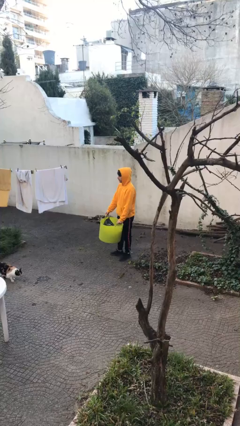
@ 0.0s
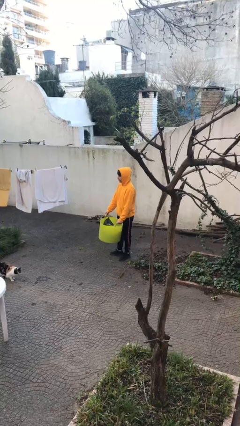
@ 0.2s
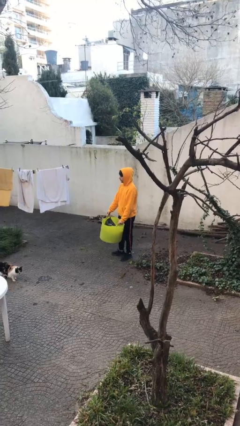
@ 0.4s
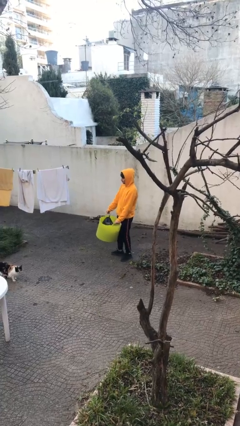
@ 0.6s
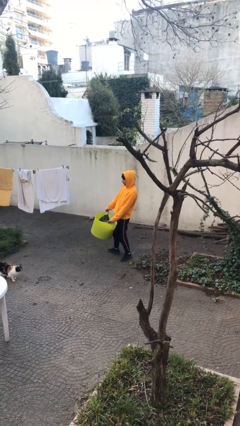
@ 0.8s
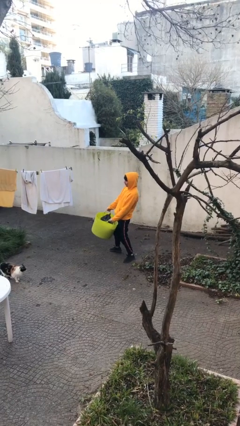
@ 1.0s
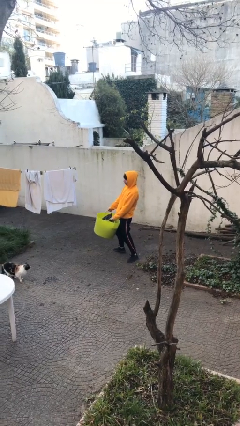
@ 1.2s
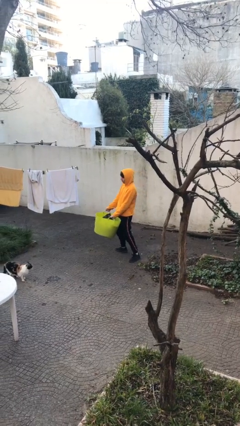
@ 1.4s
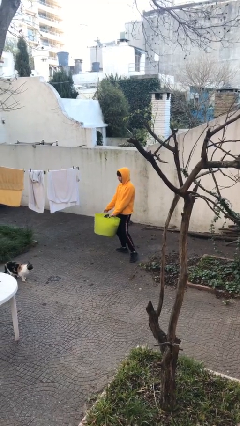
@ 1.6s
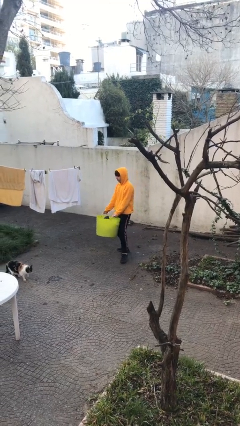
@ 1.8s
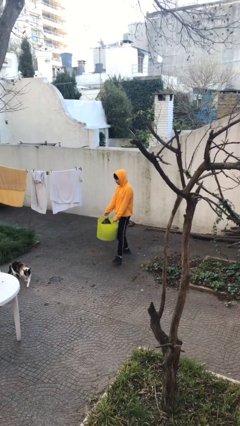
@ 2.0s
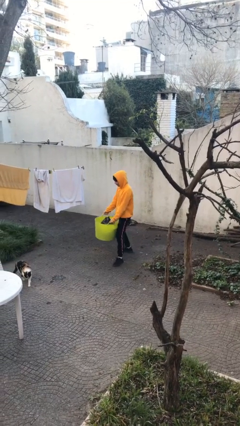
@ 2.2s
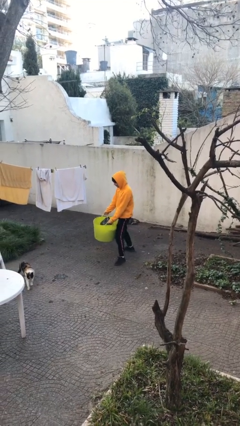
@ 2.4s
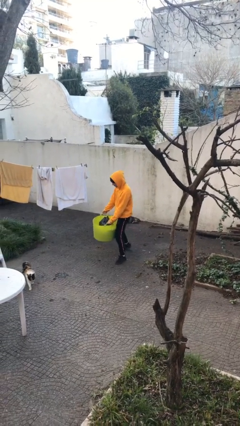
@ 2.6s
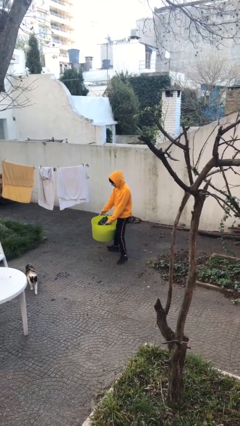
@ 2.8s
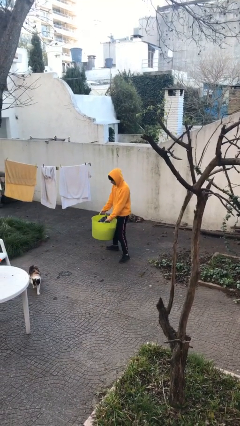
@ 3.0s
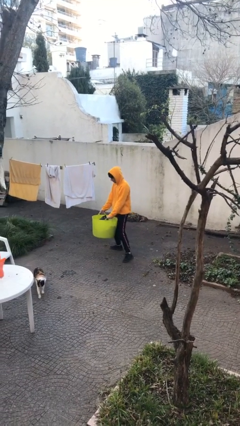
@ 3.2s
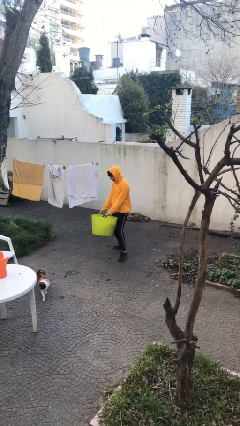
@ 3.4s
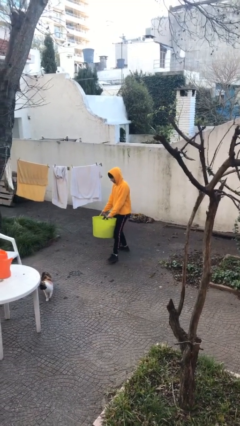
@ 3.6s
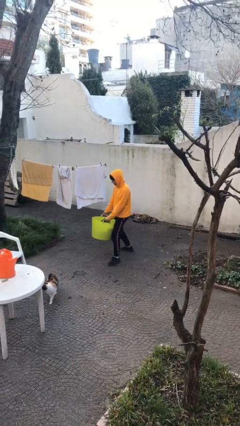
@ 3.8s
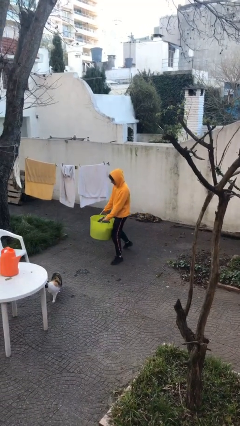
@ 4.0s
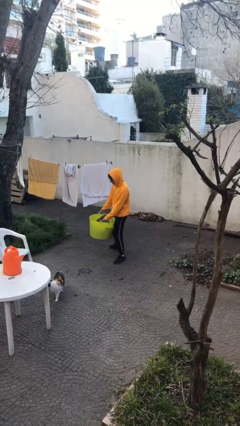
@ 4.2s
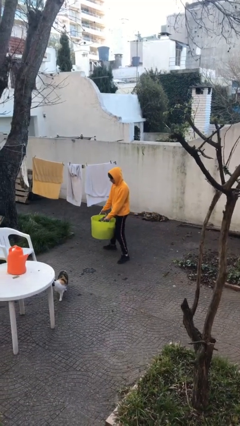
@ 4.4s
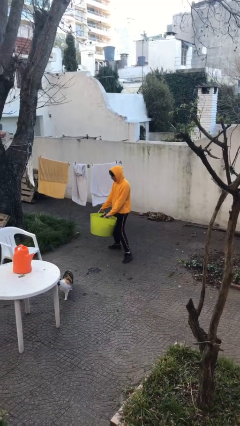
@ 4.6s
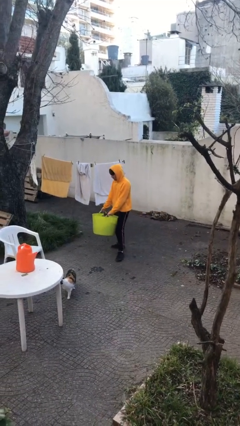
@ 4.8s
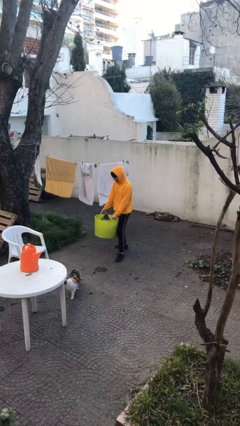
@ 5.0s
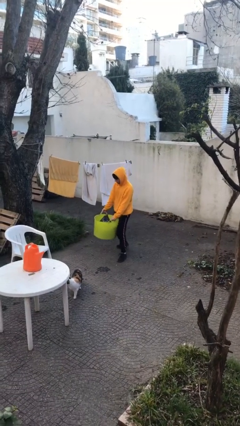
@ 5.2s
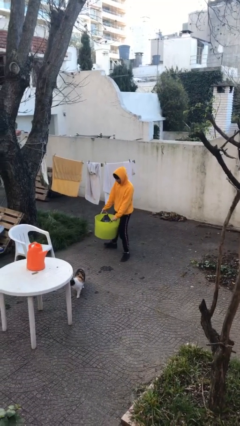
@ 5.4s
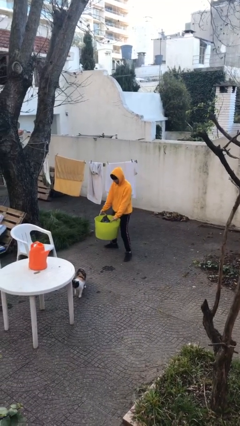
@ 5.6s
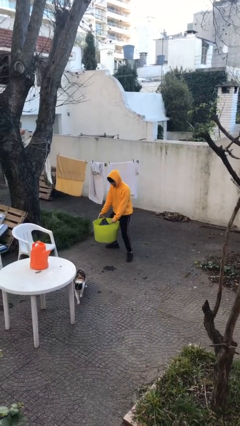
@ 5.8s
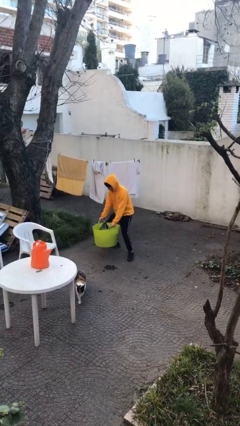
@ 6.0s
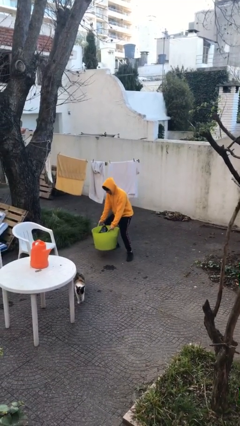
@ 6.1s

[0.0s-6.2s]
person carries heavy object

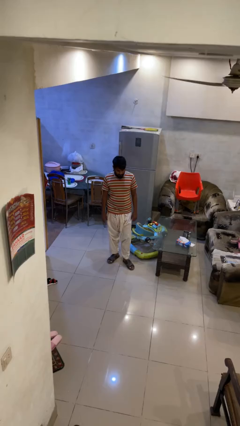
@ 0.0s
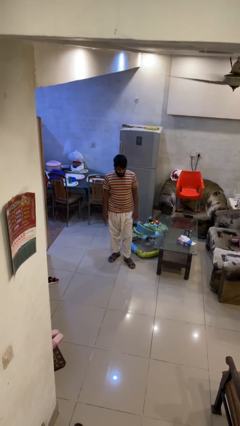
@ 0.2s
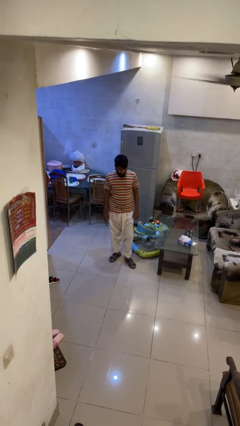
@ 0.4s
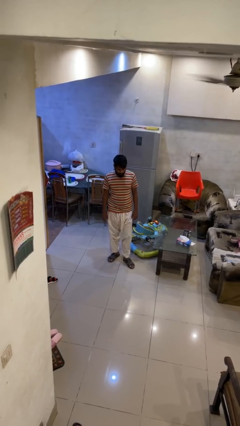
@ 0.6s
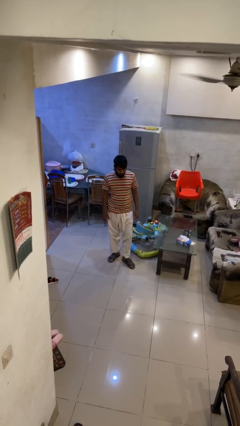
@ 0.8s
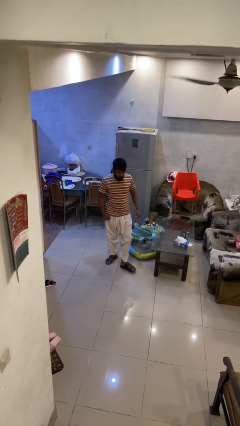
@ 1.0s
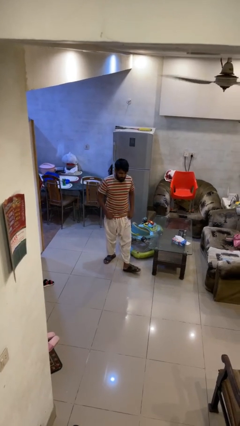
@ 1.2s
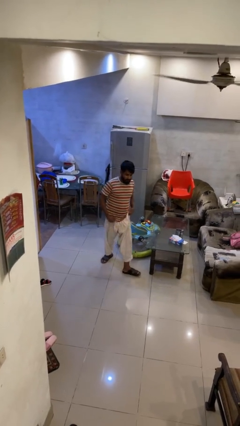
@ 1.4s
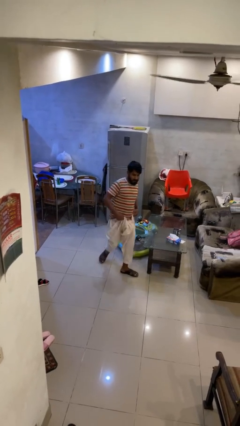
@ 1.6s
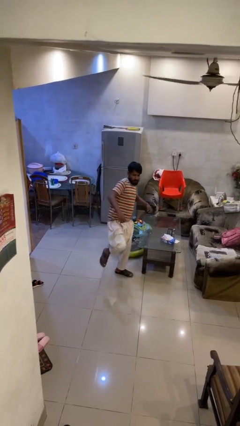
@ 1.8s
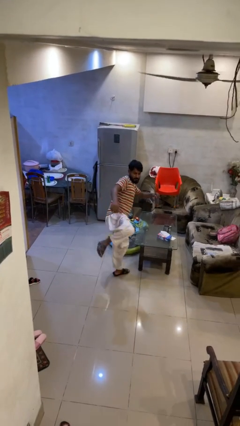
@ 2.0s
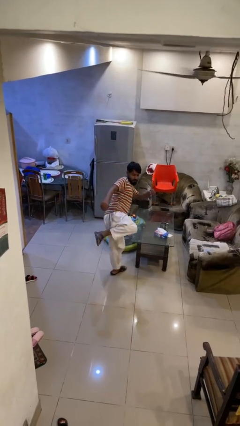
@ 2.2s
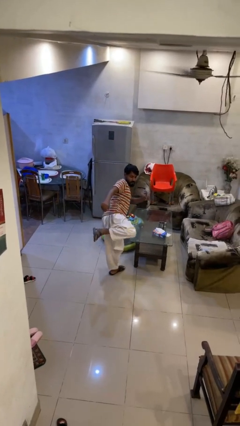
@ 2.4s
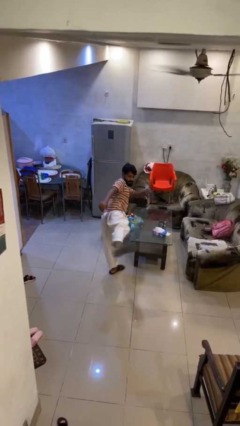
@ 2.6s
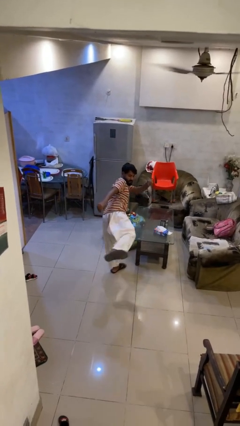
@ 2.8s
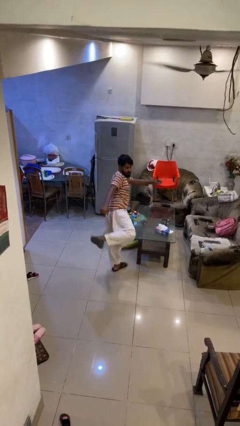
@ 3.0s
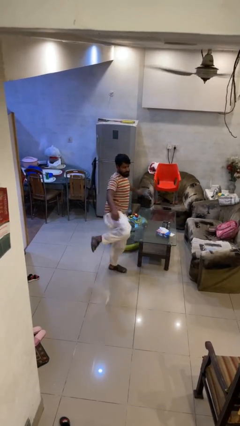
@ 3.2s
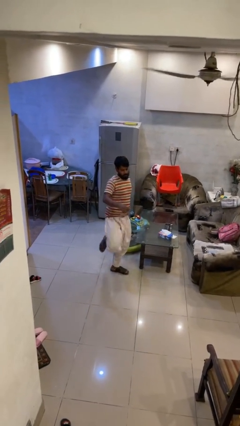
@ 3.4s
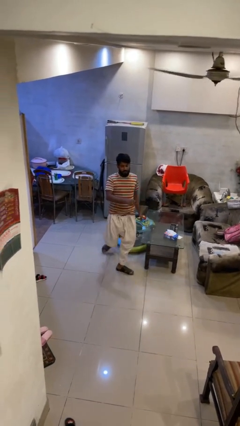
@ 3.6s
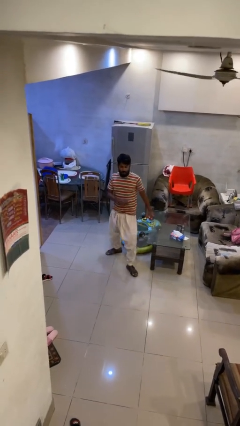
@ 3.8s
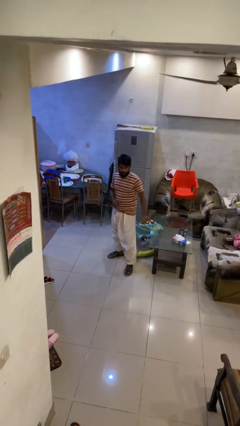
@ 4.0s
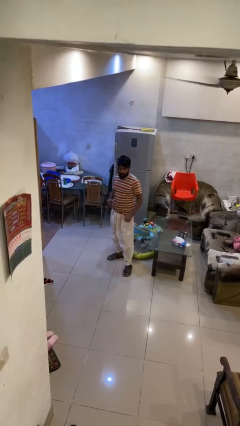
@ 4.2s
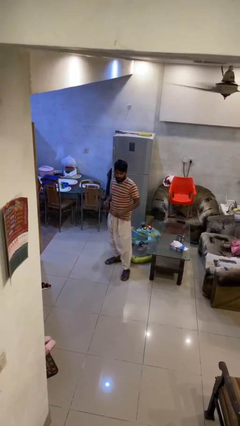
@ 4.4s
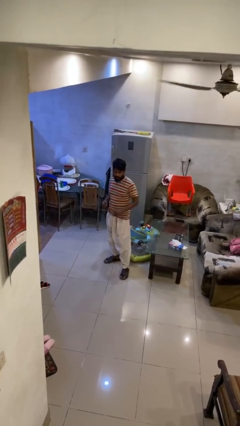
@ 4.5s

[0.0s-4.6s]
person karate kicks

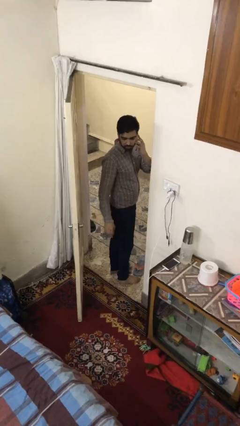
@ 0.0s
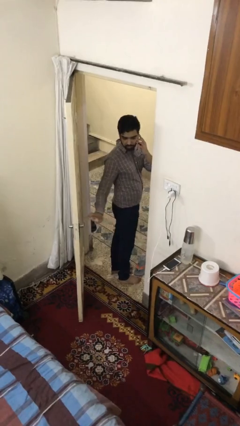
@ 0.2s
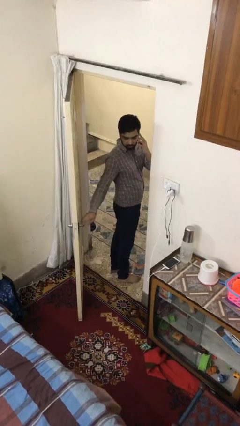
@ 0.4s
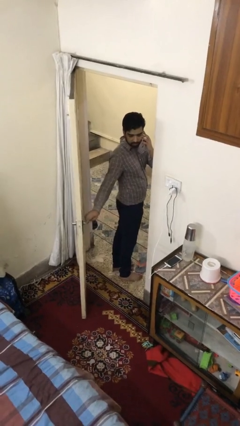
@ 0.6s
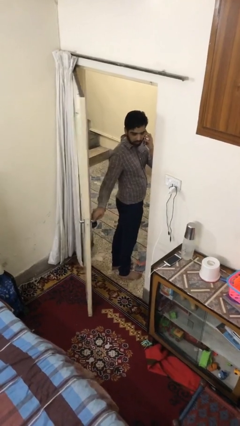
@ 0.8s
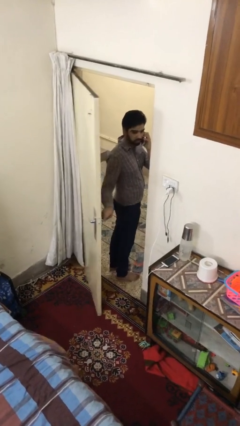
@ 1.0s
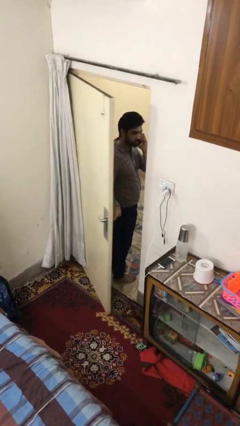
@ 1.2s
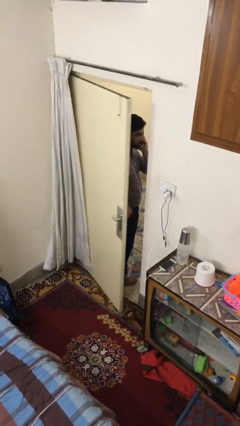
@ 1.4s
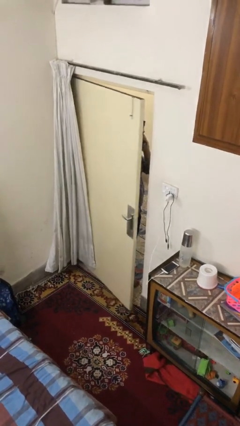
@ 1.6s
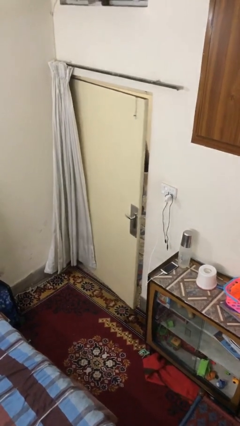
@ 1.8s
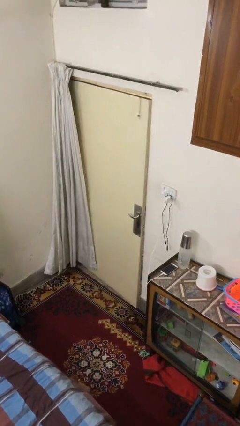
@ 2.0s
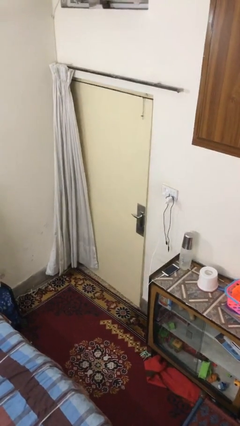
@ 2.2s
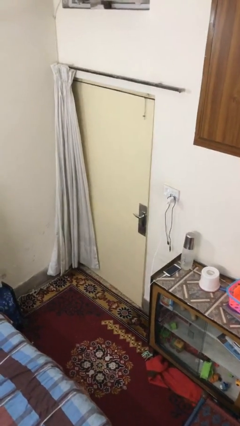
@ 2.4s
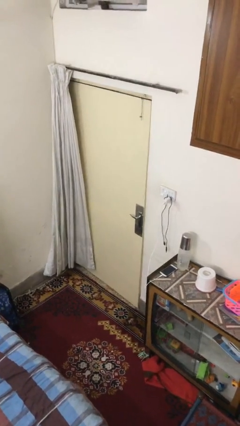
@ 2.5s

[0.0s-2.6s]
person closes facility door

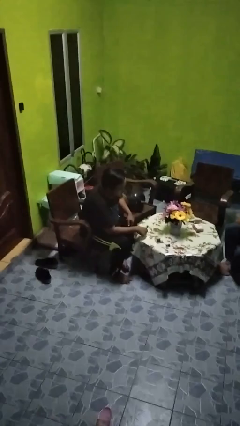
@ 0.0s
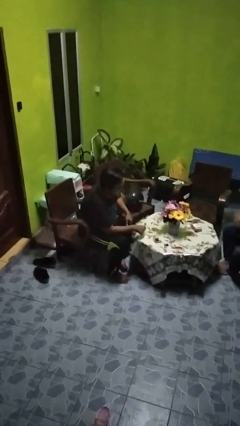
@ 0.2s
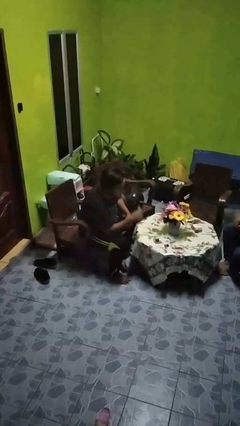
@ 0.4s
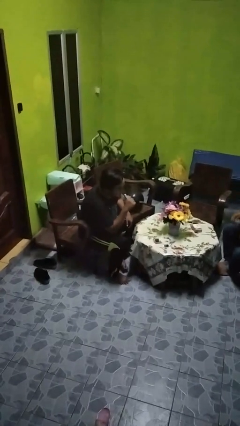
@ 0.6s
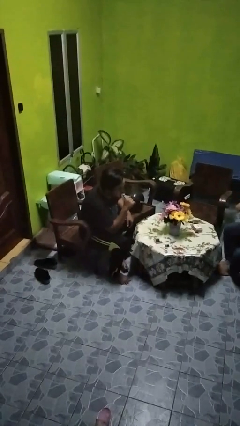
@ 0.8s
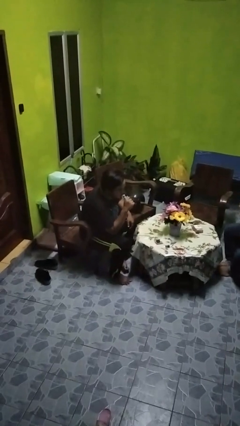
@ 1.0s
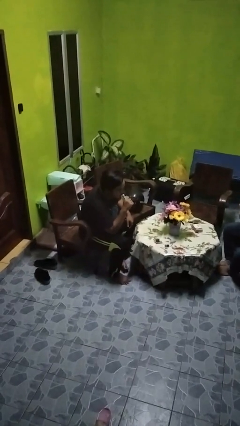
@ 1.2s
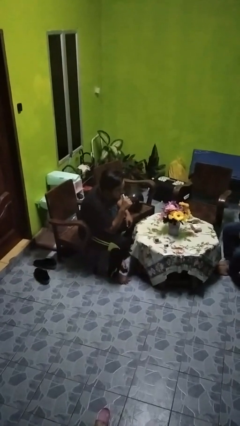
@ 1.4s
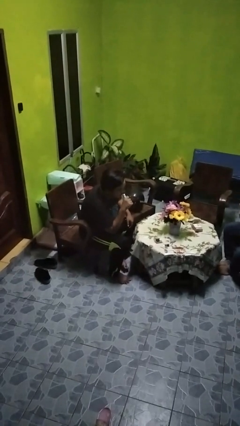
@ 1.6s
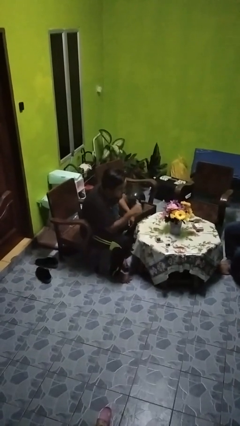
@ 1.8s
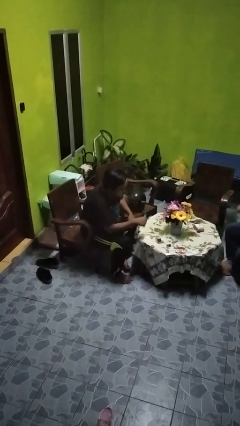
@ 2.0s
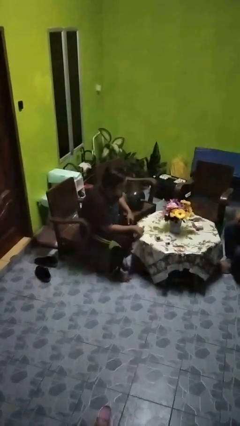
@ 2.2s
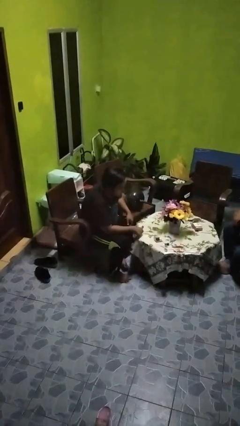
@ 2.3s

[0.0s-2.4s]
person vapes

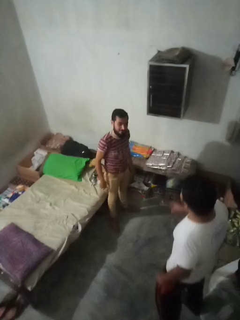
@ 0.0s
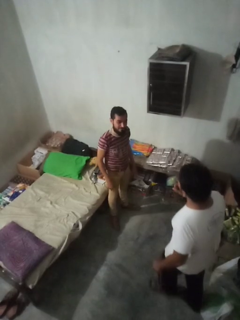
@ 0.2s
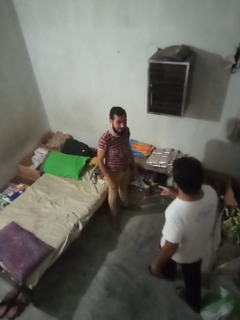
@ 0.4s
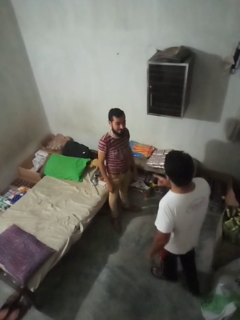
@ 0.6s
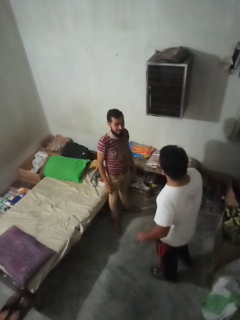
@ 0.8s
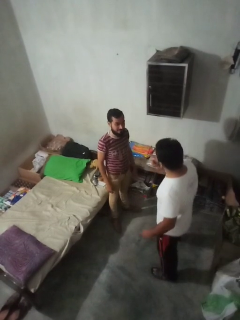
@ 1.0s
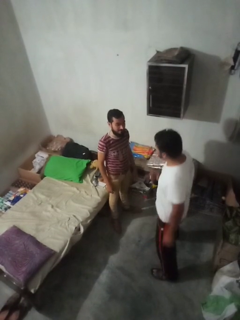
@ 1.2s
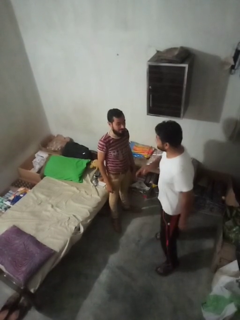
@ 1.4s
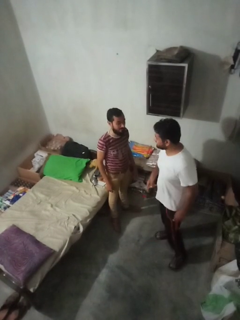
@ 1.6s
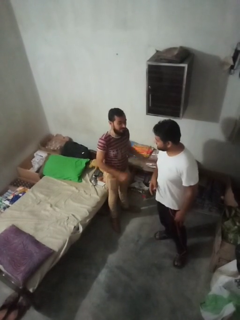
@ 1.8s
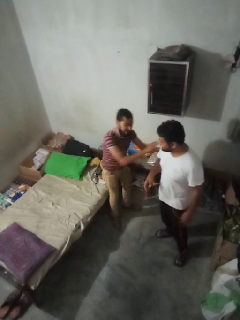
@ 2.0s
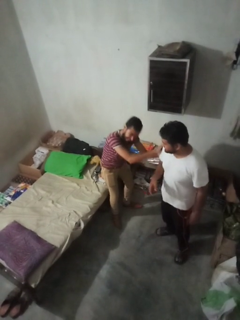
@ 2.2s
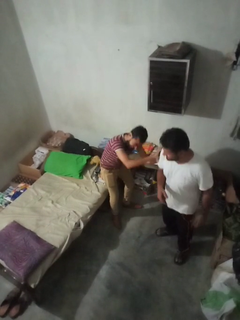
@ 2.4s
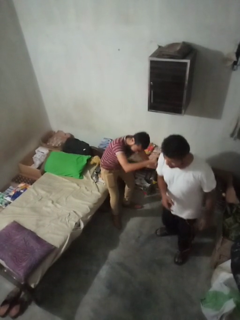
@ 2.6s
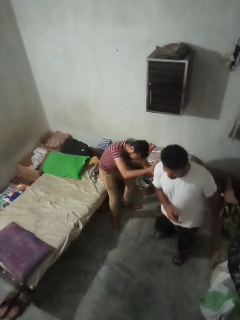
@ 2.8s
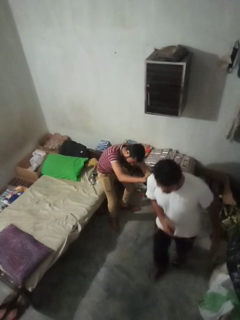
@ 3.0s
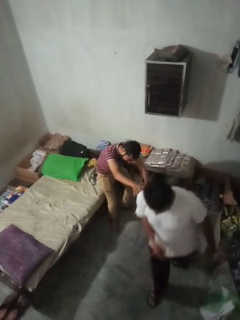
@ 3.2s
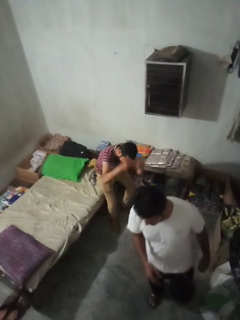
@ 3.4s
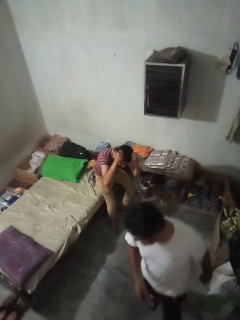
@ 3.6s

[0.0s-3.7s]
person shoves person
